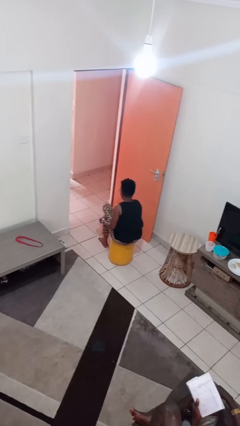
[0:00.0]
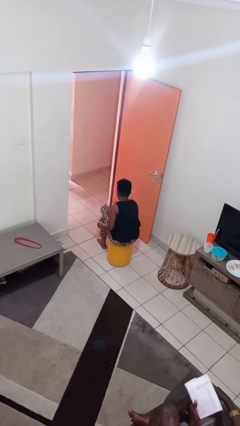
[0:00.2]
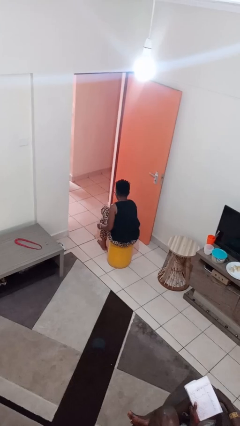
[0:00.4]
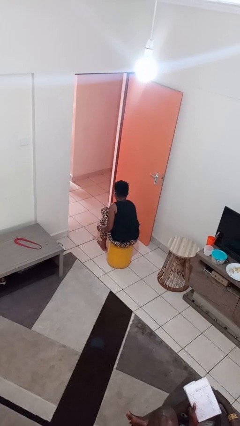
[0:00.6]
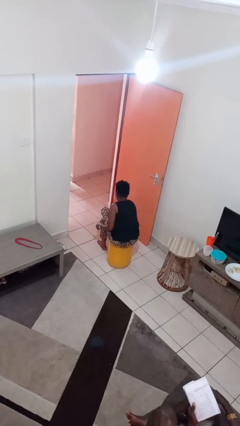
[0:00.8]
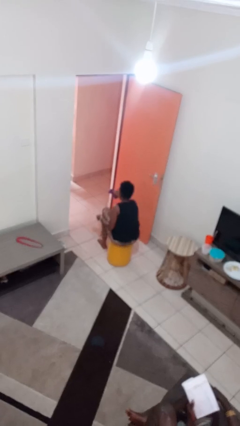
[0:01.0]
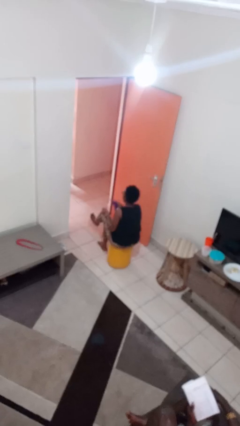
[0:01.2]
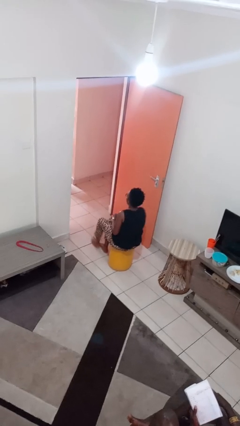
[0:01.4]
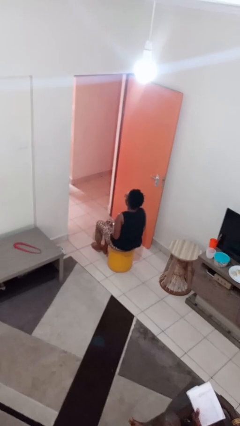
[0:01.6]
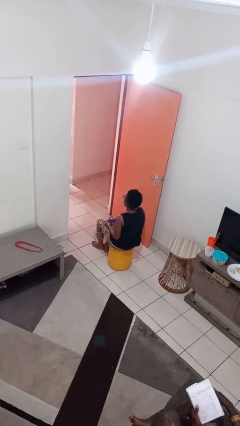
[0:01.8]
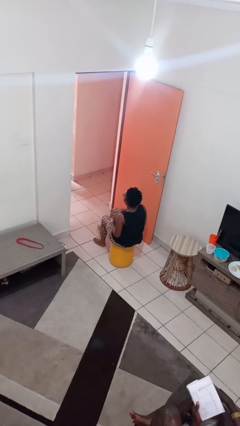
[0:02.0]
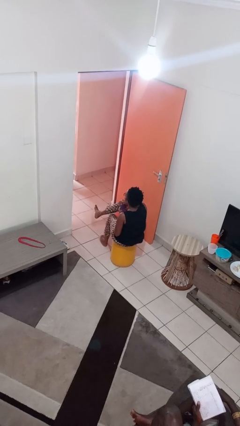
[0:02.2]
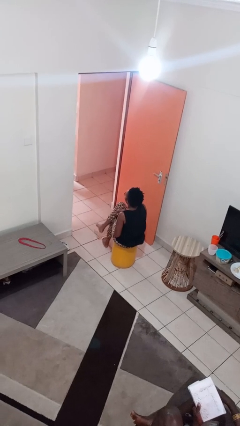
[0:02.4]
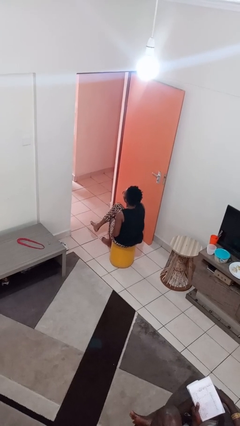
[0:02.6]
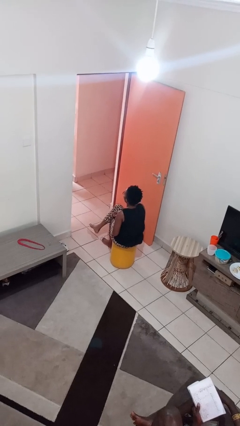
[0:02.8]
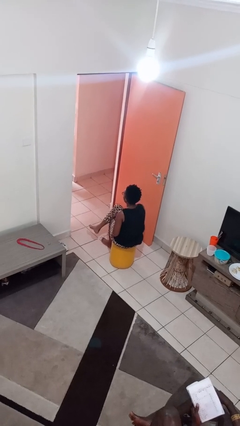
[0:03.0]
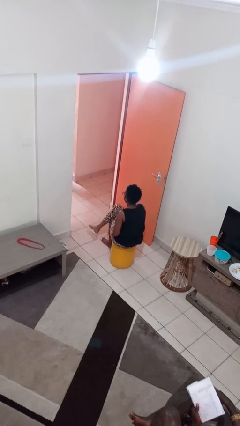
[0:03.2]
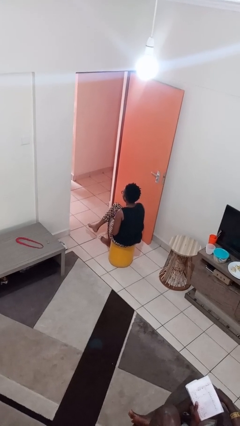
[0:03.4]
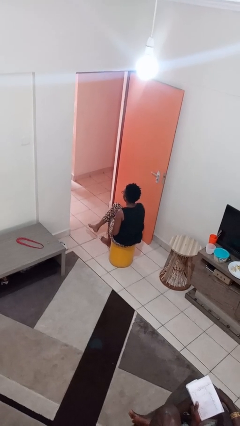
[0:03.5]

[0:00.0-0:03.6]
person takes off socks

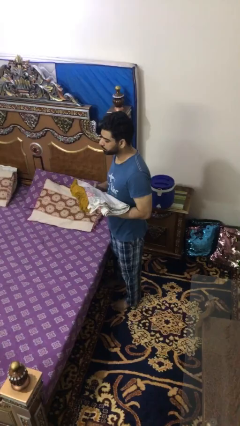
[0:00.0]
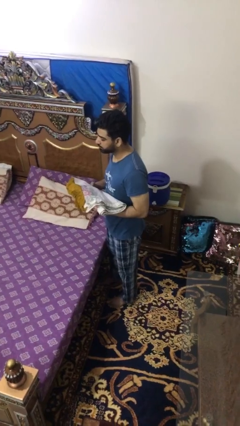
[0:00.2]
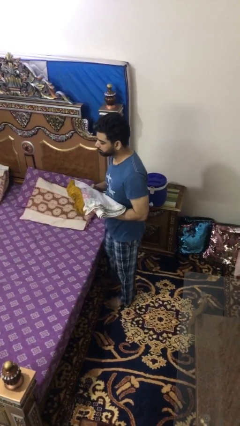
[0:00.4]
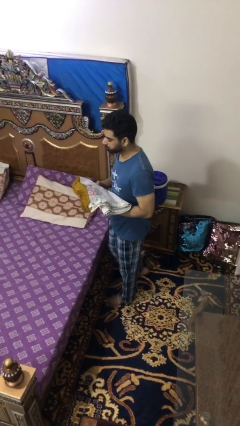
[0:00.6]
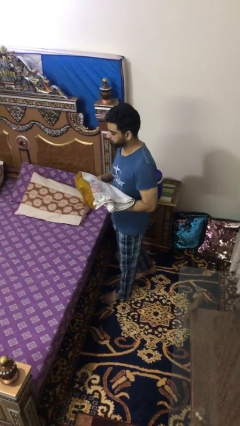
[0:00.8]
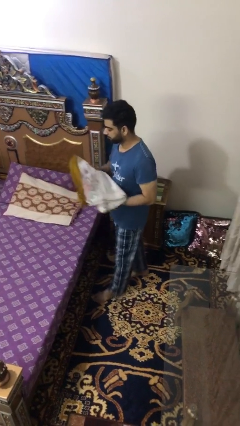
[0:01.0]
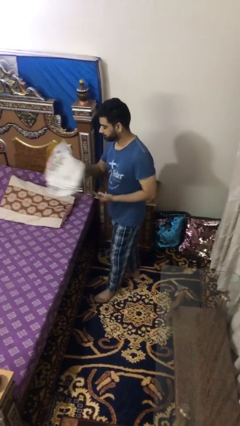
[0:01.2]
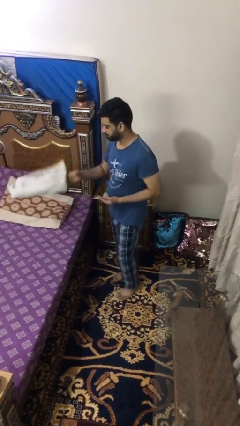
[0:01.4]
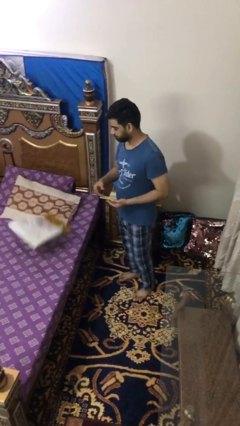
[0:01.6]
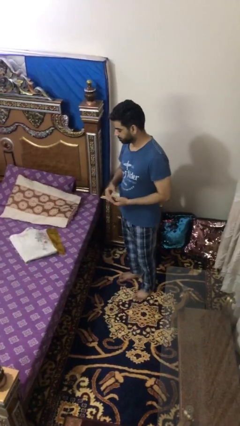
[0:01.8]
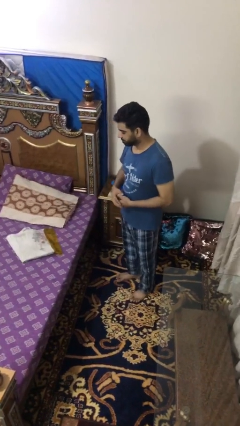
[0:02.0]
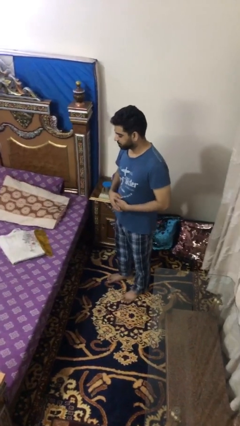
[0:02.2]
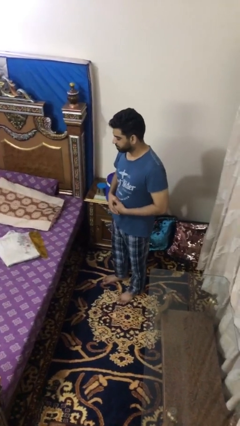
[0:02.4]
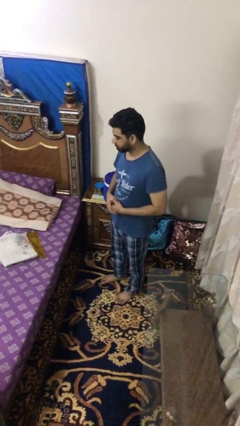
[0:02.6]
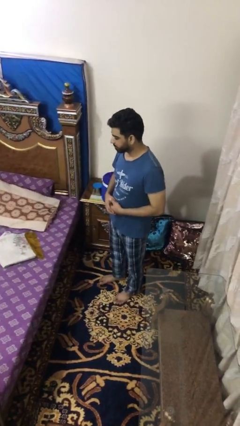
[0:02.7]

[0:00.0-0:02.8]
person throws object on bed

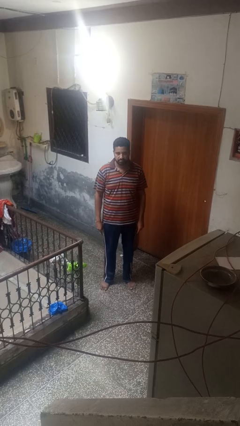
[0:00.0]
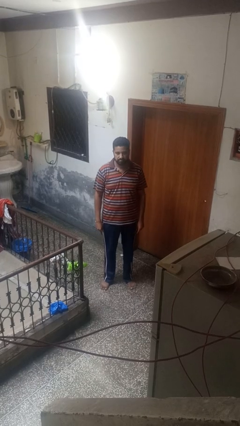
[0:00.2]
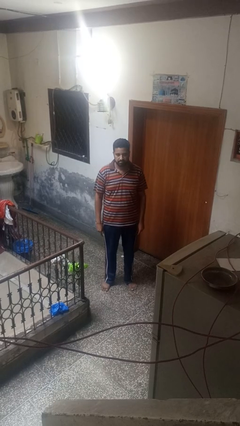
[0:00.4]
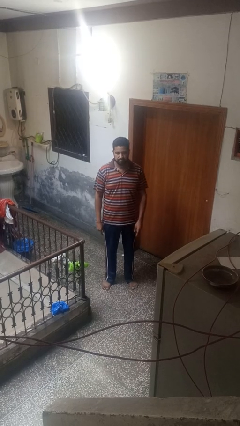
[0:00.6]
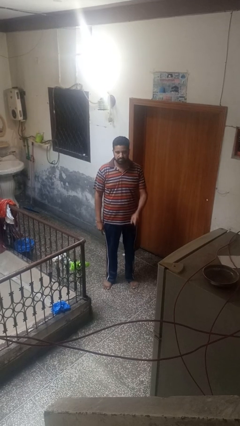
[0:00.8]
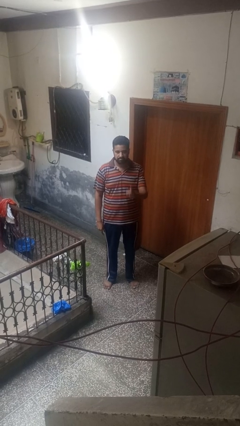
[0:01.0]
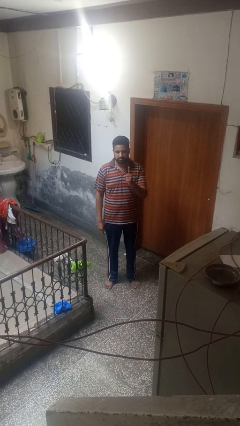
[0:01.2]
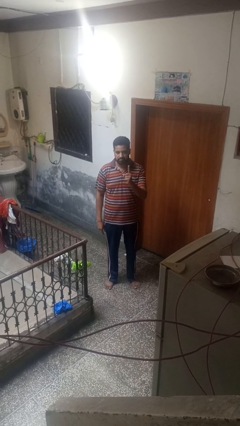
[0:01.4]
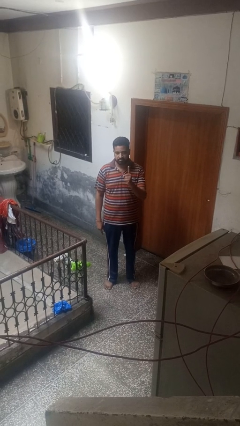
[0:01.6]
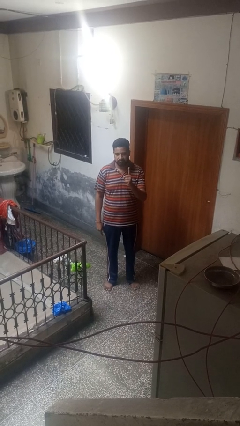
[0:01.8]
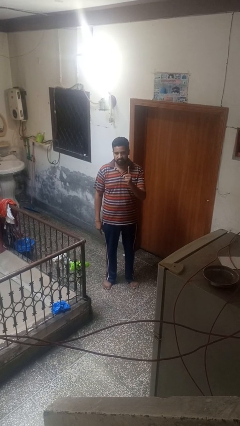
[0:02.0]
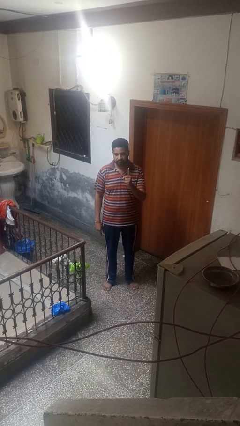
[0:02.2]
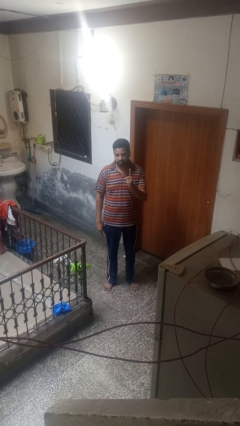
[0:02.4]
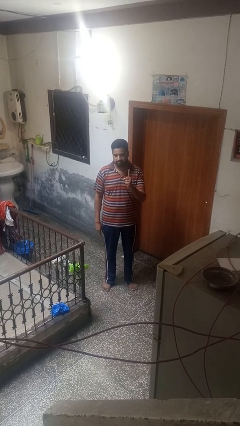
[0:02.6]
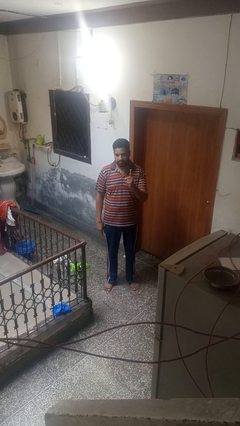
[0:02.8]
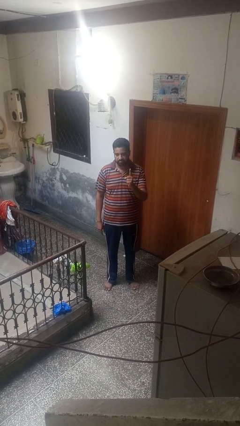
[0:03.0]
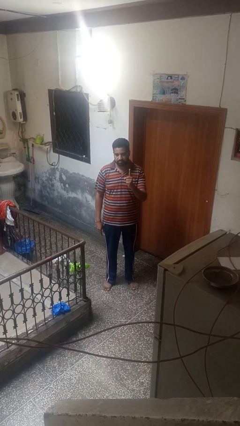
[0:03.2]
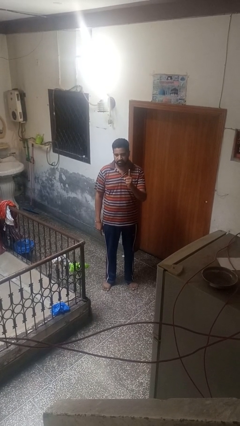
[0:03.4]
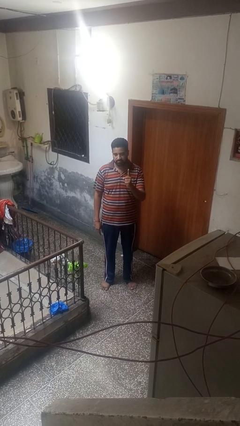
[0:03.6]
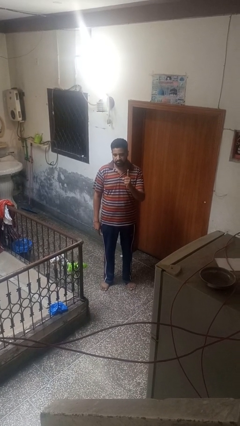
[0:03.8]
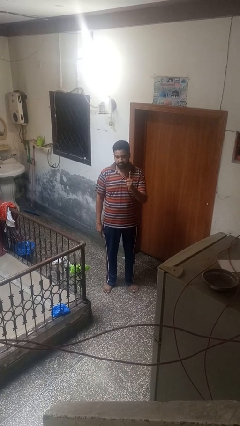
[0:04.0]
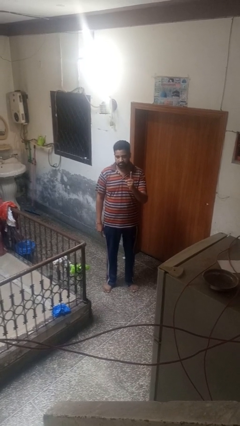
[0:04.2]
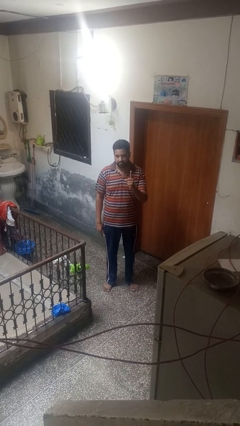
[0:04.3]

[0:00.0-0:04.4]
person gestures number one

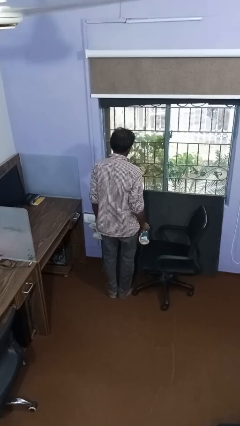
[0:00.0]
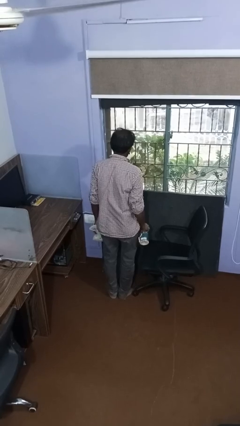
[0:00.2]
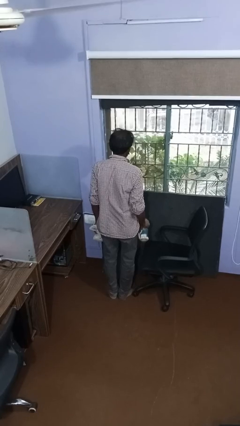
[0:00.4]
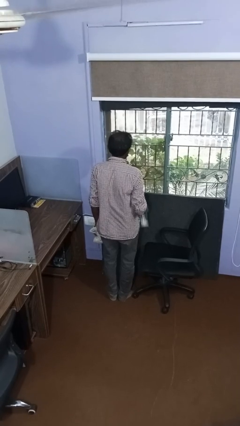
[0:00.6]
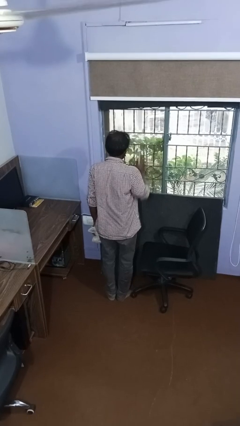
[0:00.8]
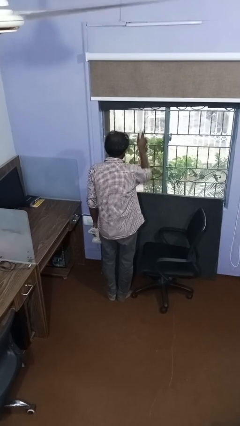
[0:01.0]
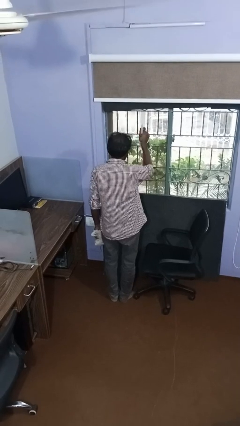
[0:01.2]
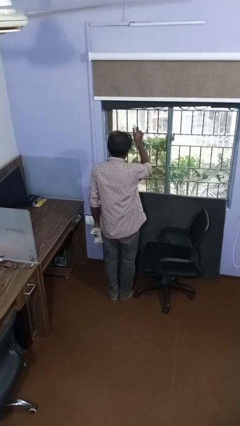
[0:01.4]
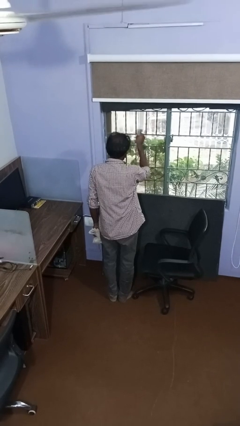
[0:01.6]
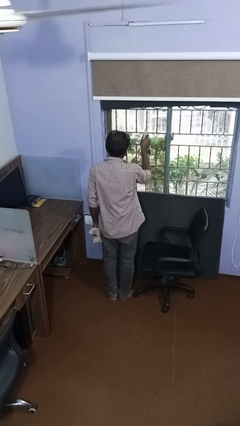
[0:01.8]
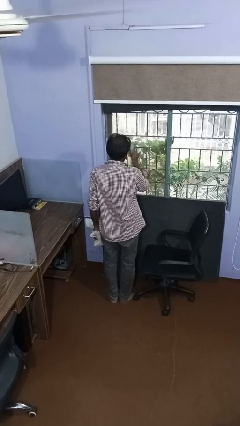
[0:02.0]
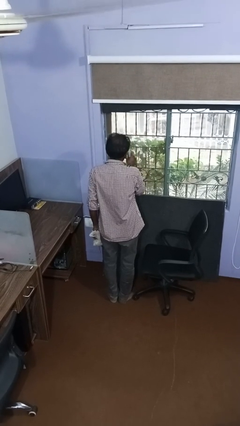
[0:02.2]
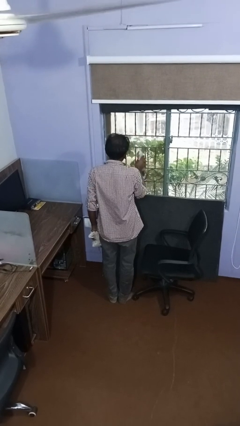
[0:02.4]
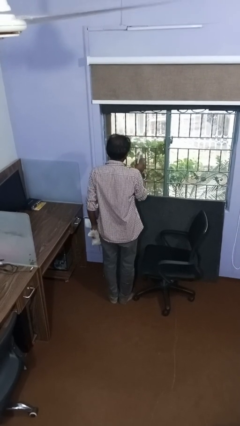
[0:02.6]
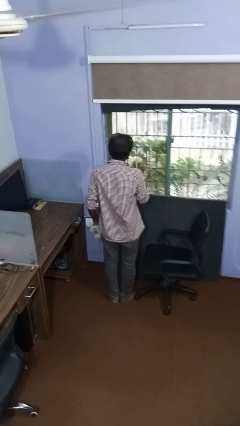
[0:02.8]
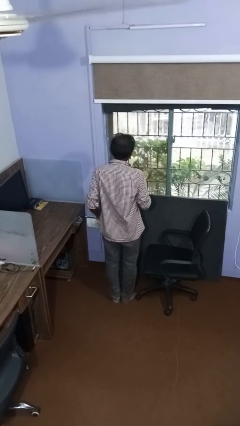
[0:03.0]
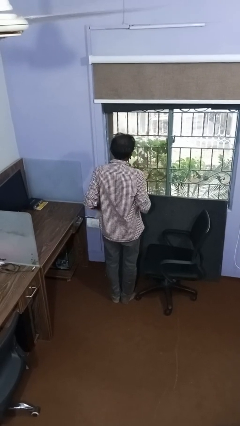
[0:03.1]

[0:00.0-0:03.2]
person sprays from bottle

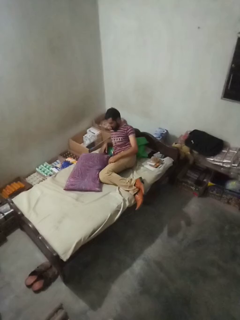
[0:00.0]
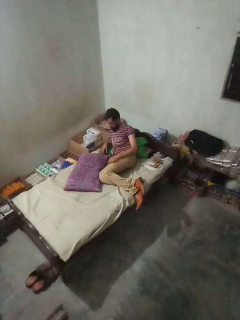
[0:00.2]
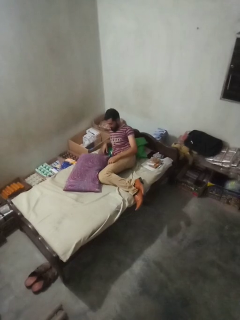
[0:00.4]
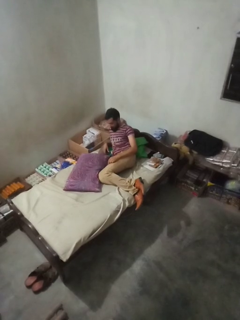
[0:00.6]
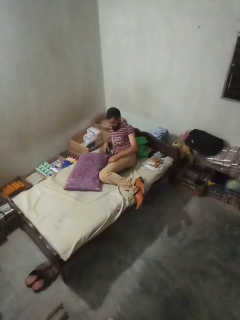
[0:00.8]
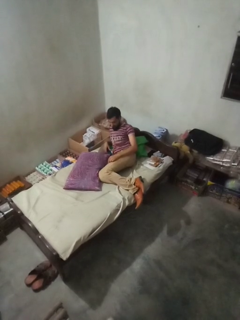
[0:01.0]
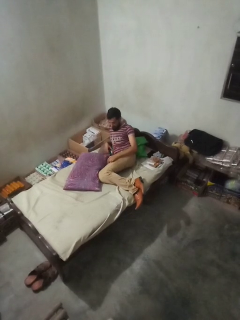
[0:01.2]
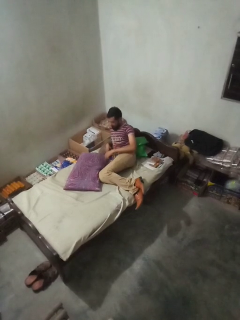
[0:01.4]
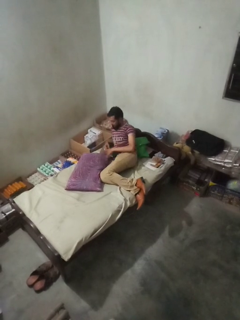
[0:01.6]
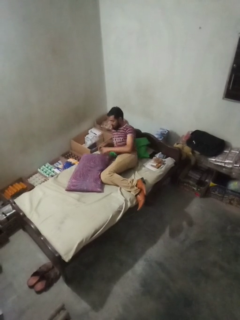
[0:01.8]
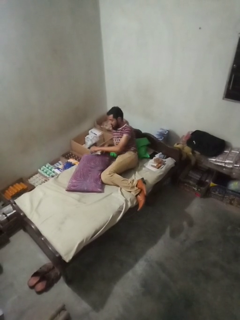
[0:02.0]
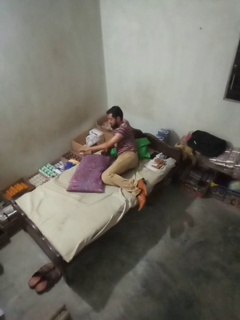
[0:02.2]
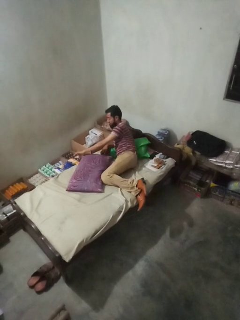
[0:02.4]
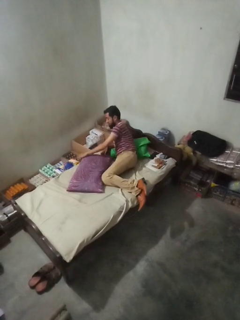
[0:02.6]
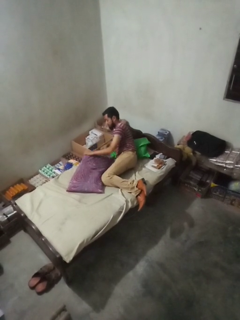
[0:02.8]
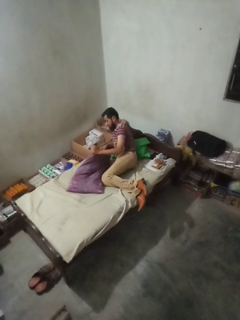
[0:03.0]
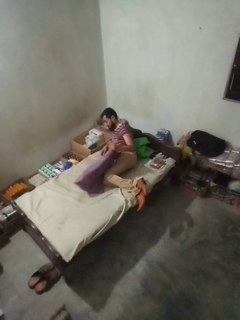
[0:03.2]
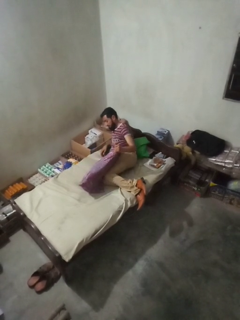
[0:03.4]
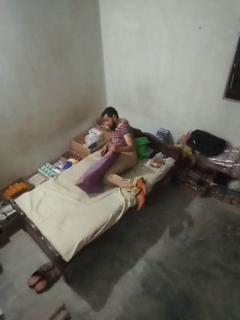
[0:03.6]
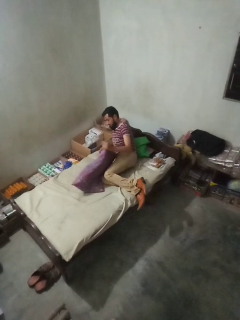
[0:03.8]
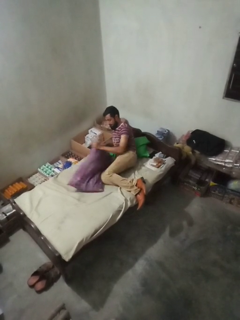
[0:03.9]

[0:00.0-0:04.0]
person searches under bed

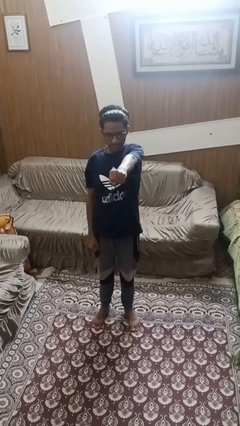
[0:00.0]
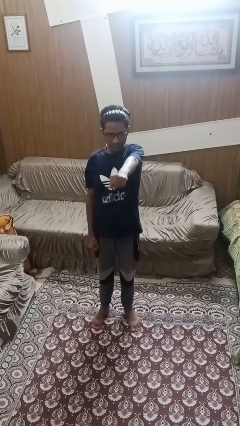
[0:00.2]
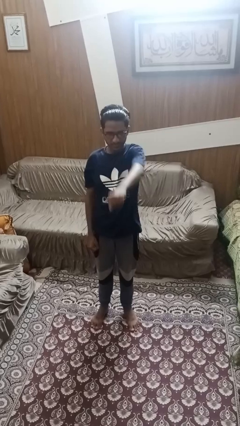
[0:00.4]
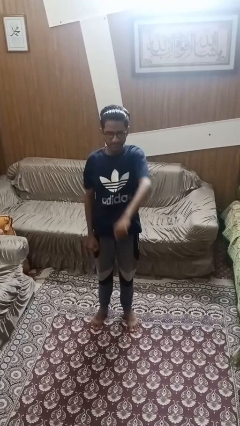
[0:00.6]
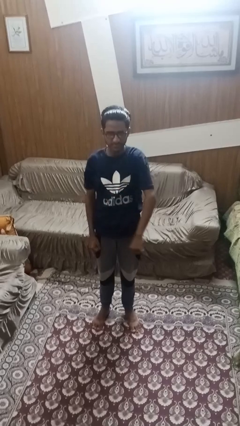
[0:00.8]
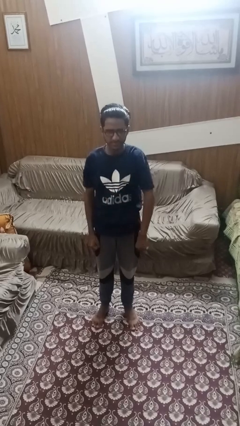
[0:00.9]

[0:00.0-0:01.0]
person punches
